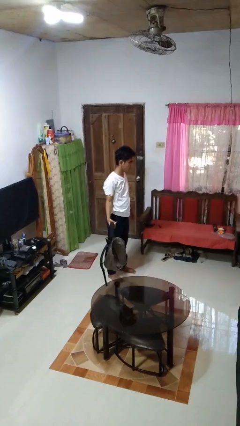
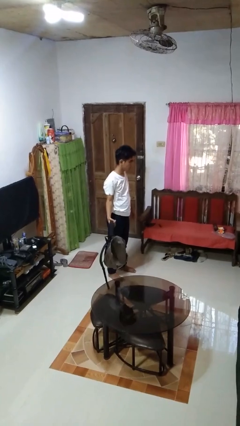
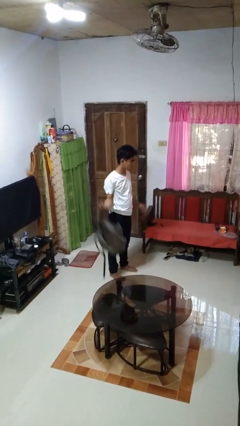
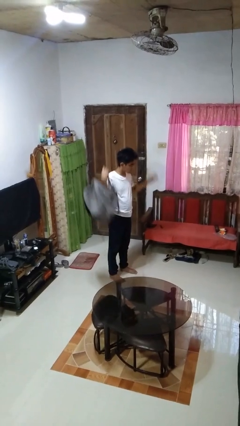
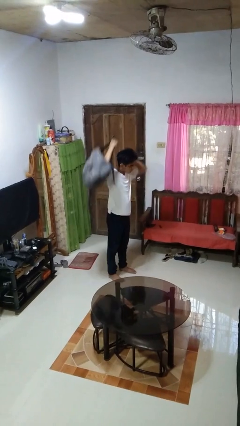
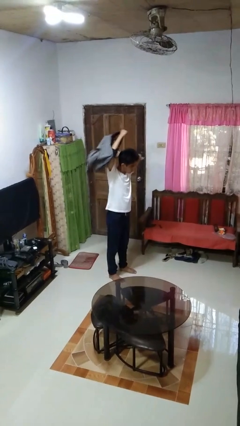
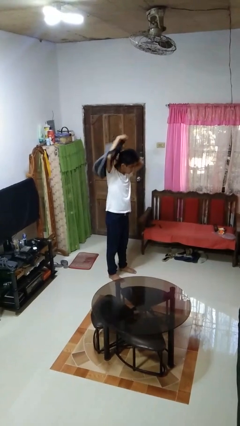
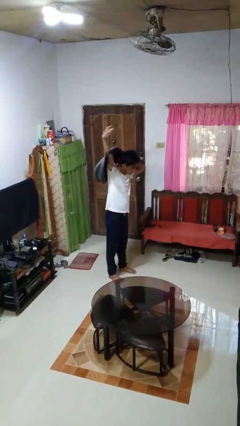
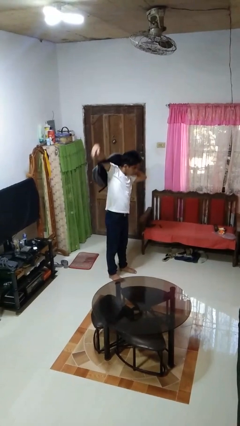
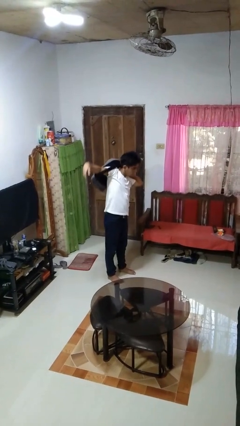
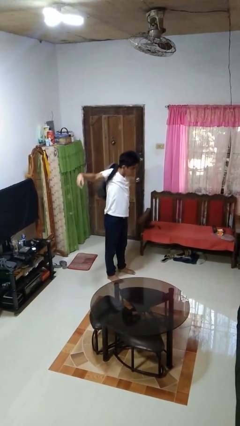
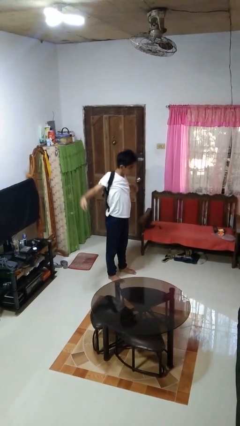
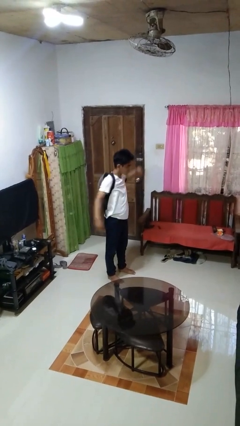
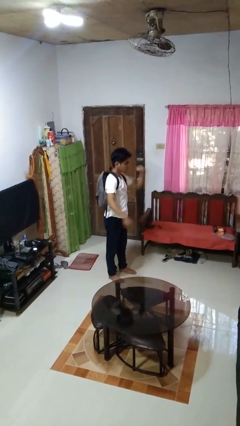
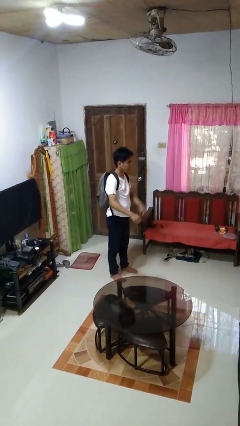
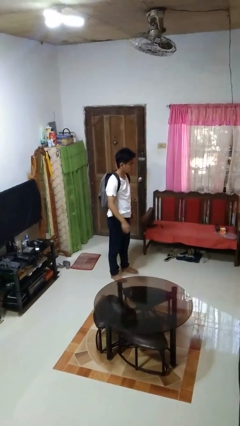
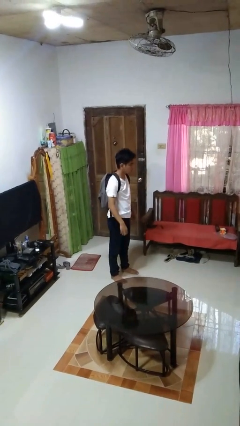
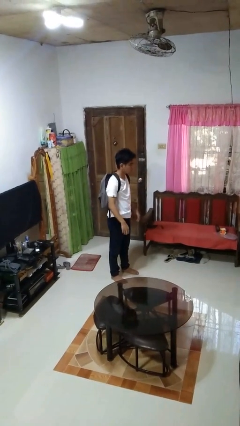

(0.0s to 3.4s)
person puts on backpack

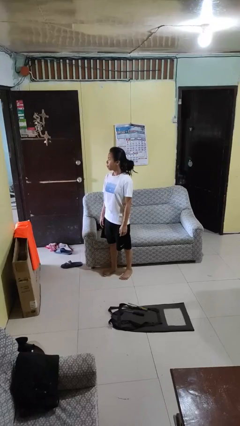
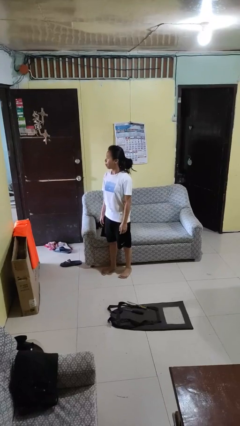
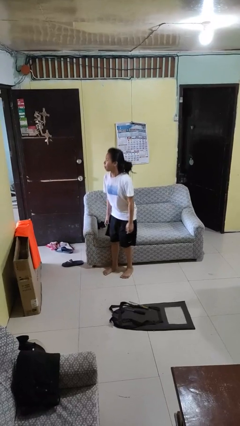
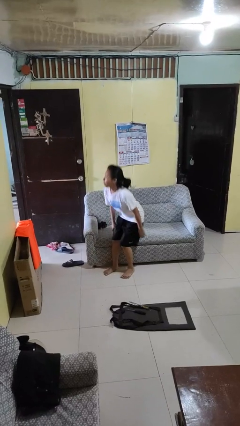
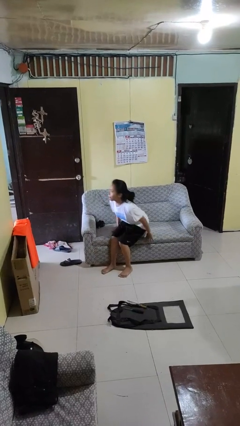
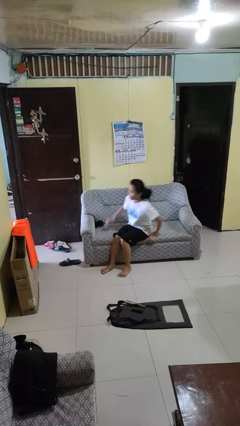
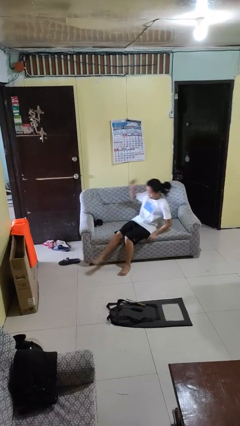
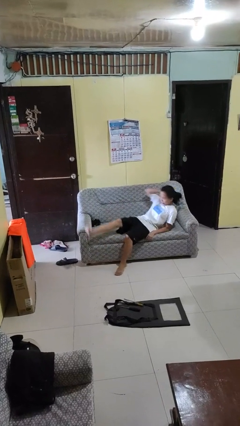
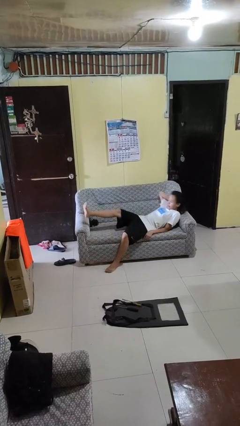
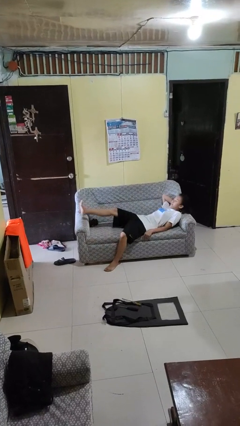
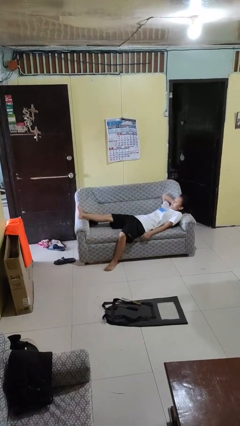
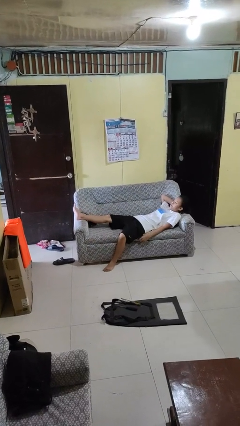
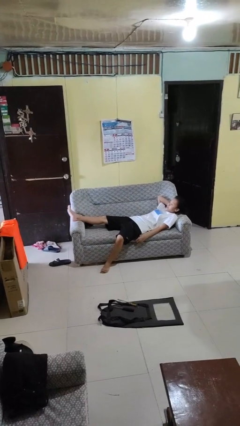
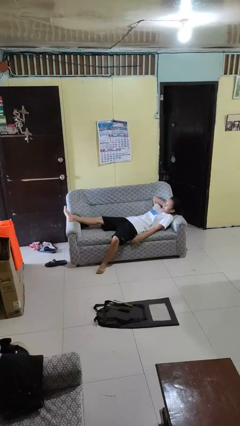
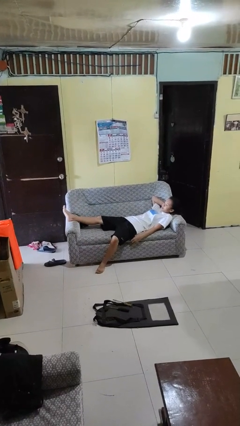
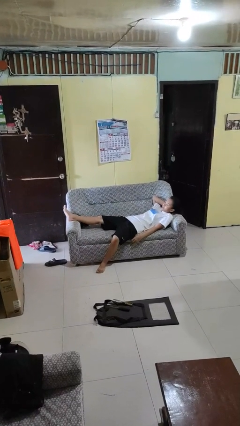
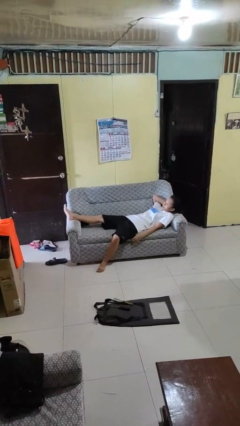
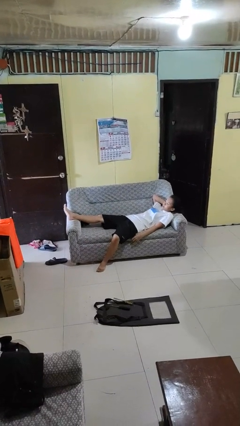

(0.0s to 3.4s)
person lies down on couch

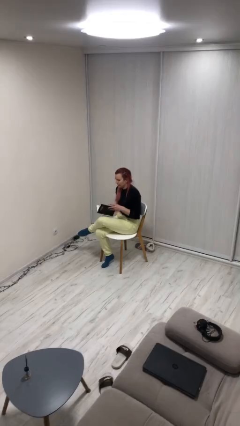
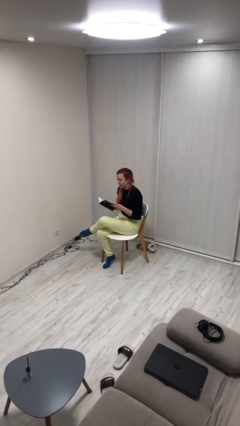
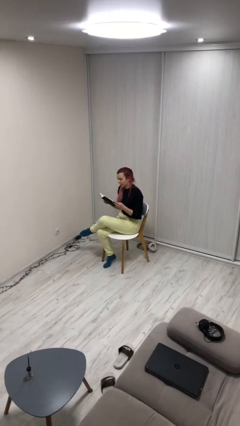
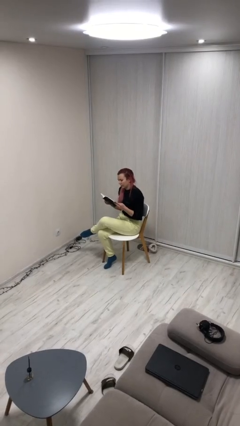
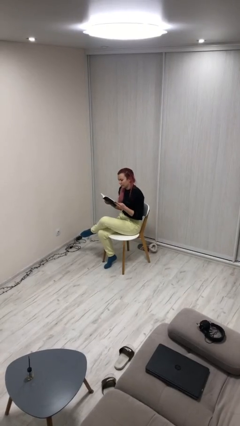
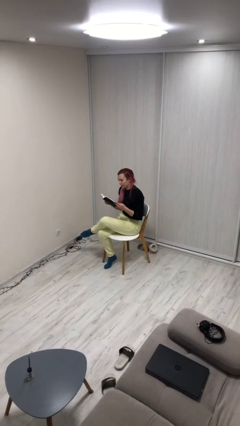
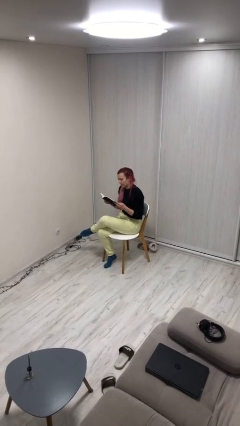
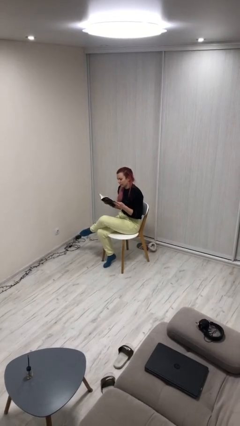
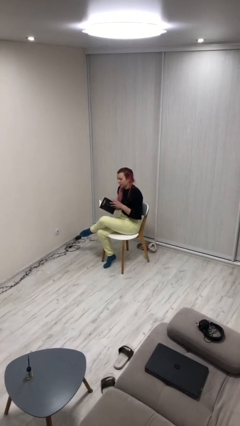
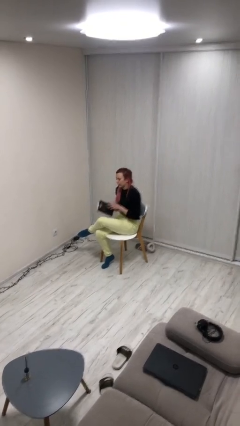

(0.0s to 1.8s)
person reads document

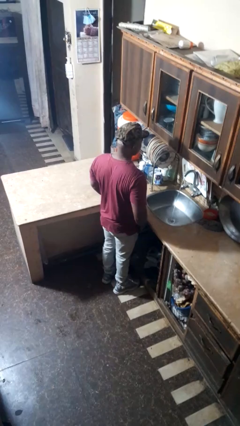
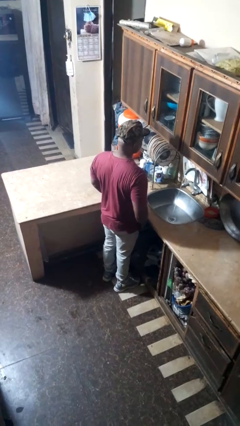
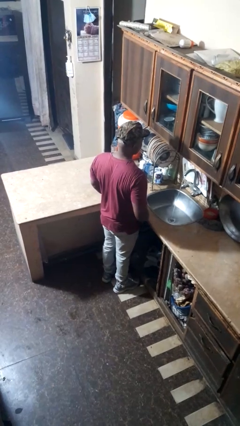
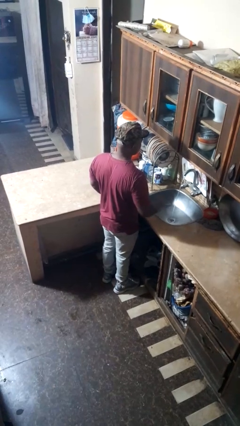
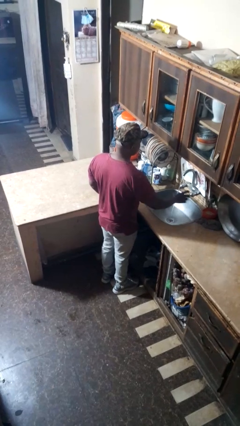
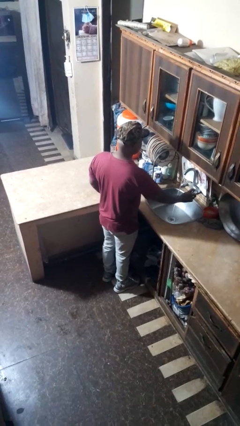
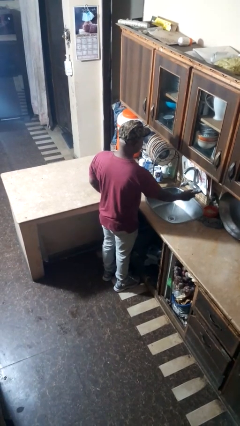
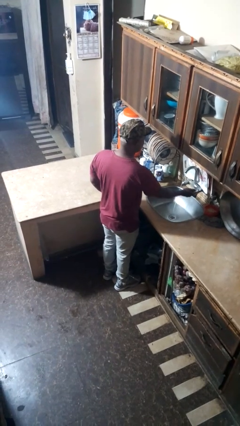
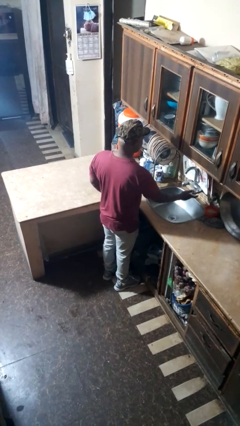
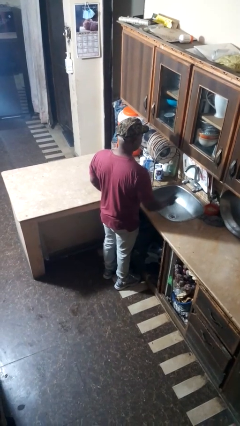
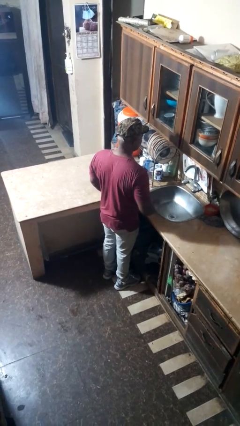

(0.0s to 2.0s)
person turns off faucet

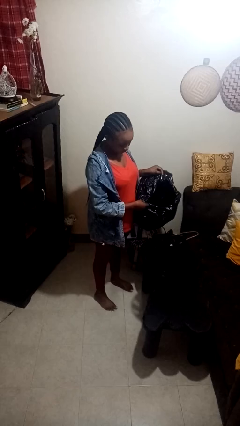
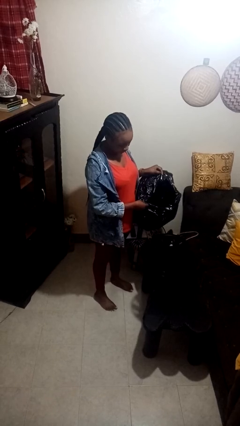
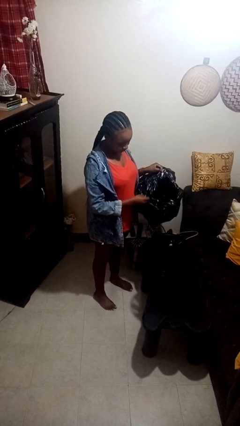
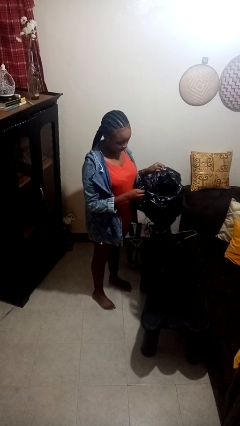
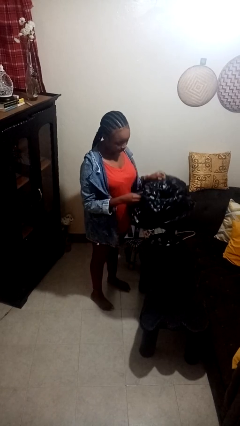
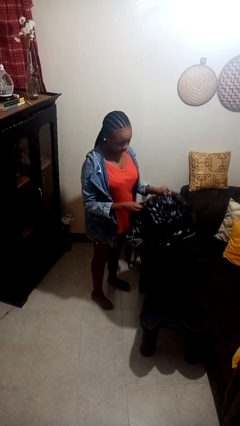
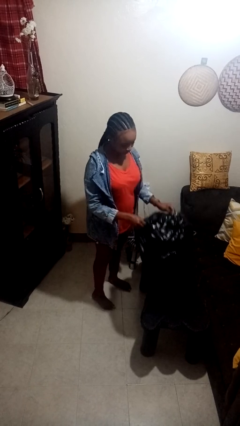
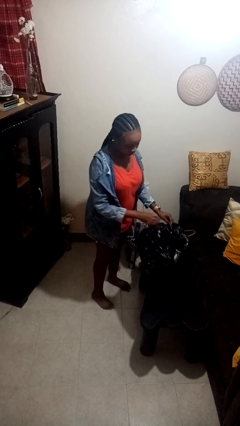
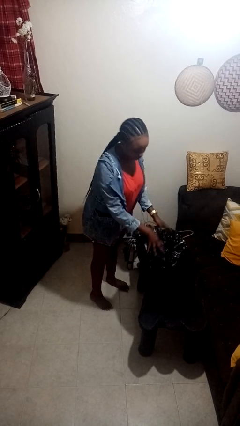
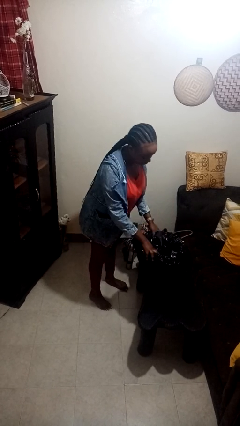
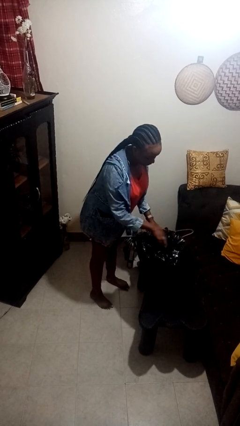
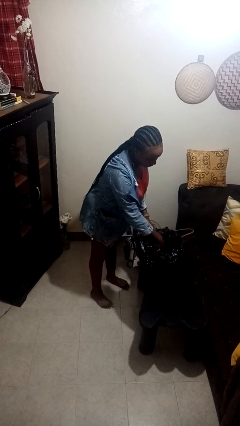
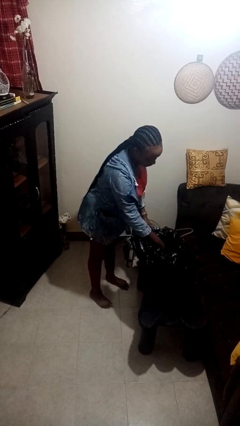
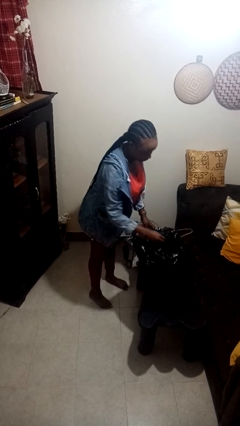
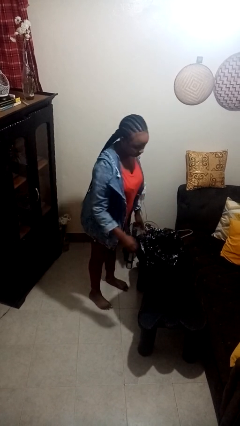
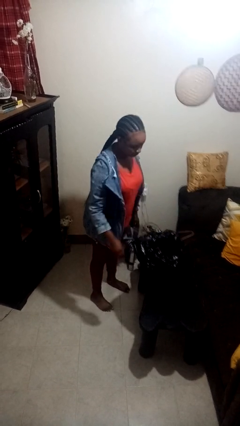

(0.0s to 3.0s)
person inserts trashbag into trashcan

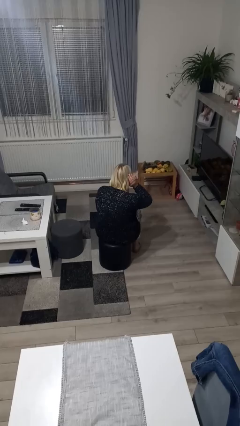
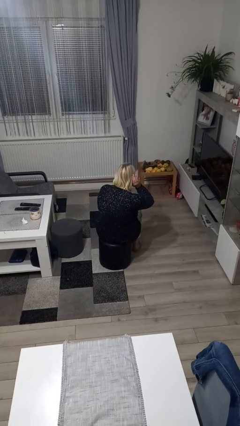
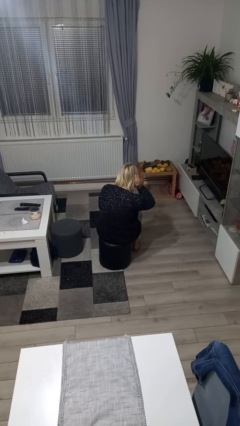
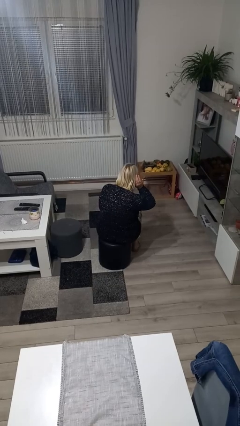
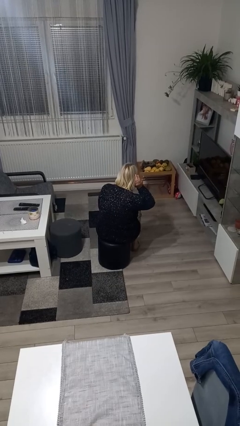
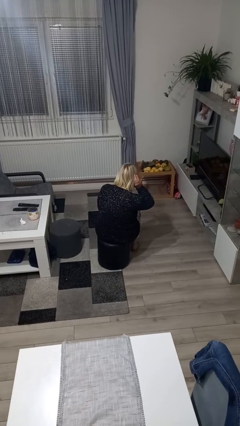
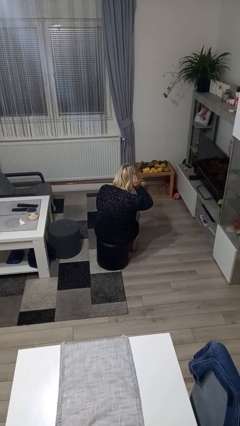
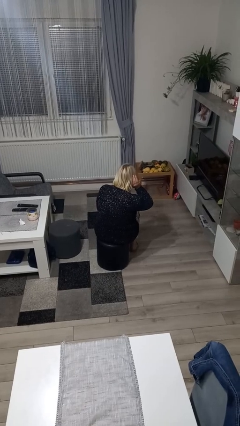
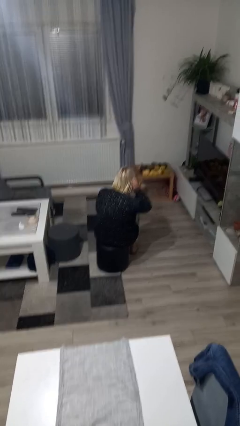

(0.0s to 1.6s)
person gestures listen closely

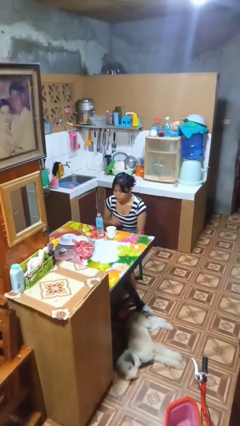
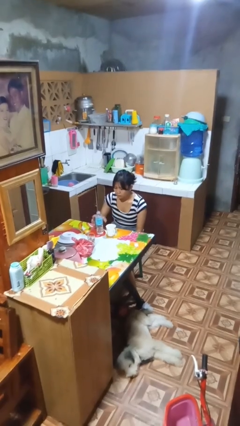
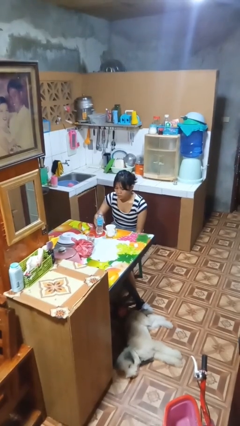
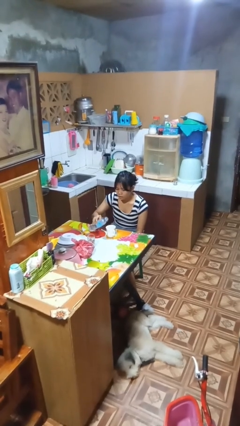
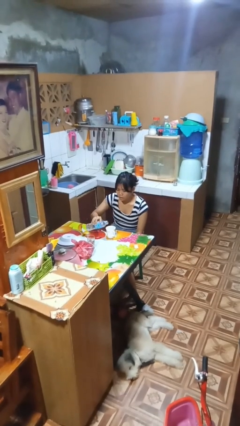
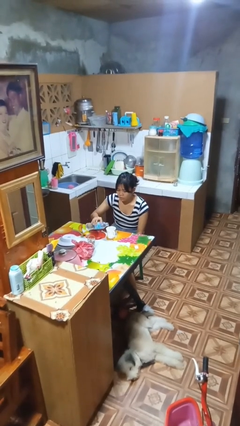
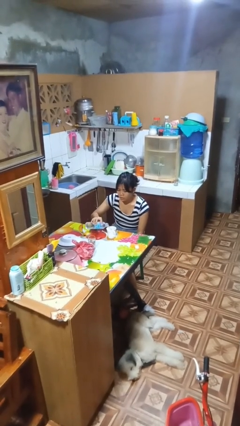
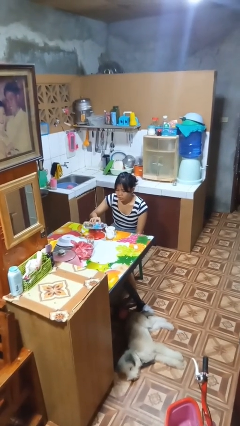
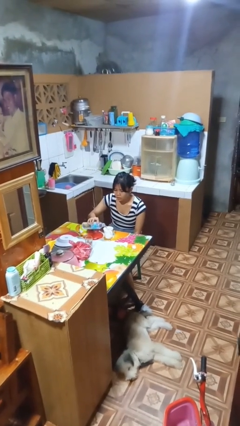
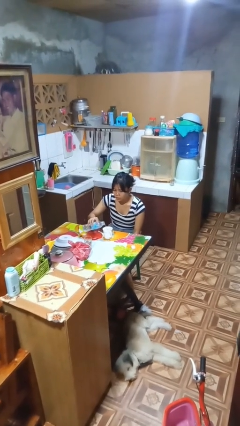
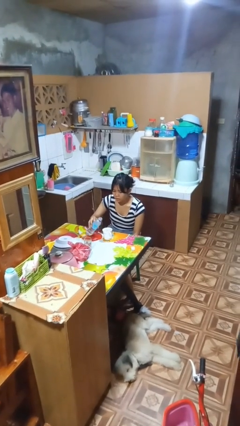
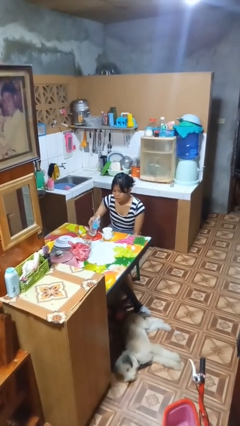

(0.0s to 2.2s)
person pours liquid into cup

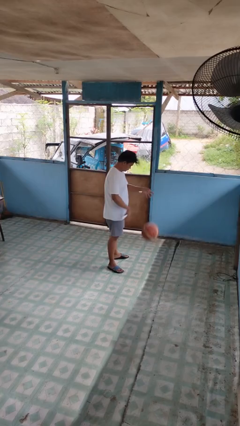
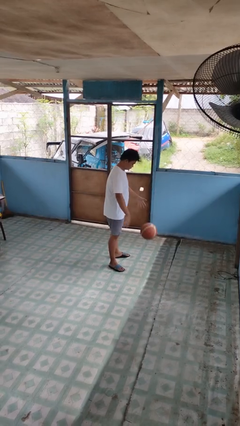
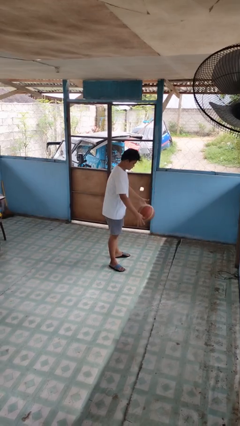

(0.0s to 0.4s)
person bounces ball on floor
